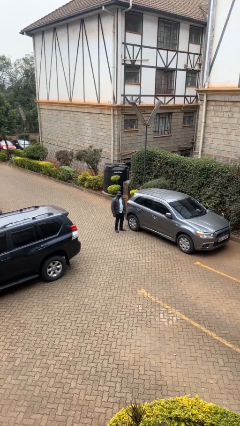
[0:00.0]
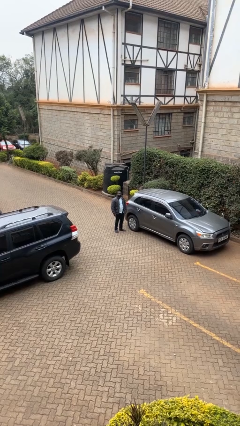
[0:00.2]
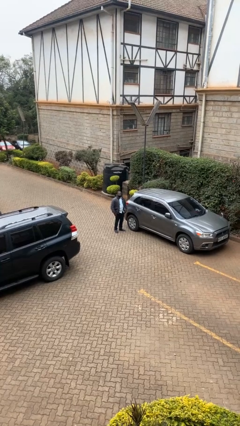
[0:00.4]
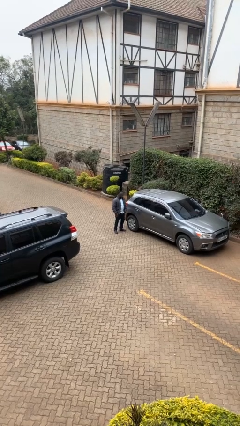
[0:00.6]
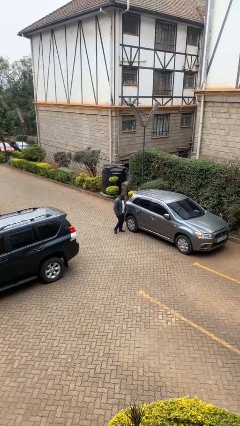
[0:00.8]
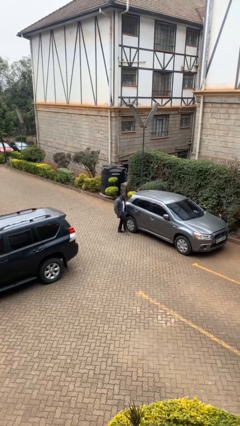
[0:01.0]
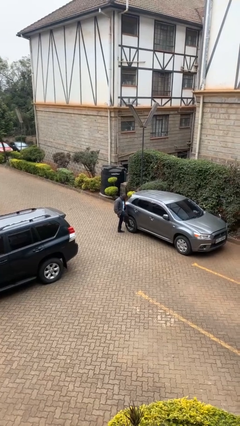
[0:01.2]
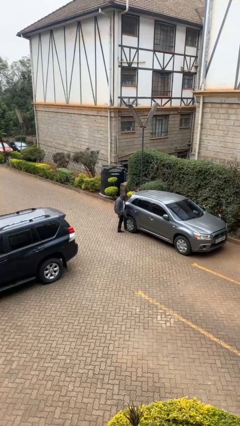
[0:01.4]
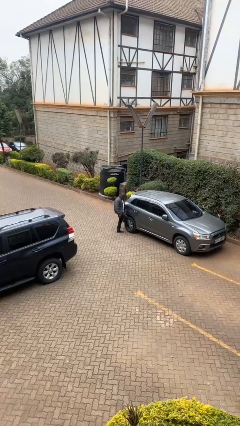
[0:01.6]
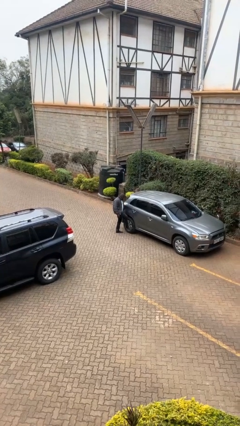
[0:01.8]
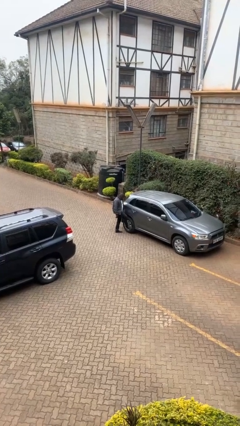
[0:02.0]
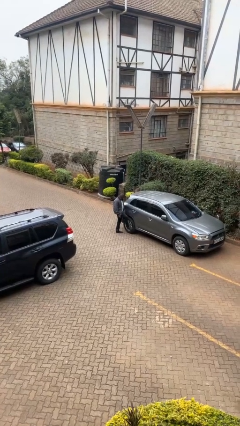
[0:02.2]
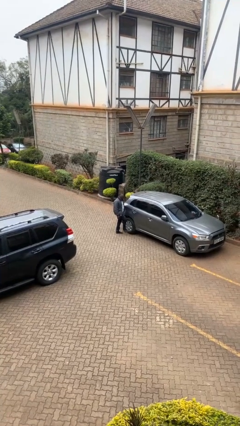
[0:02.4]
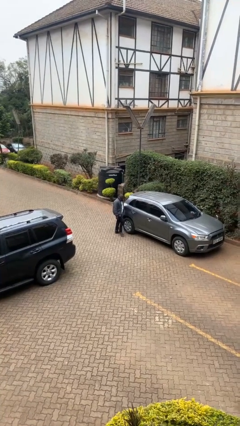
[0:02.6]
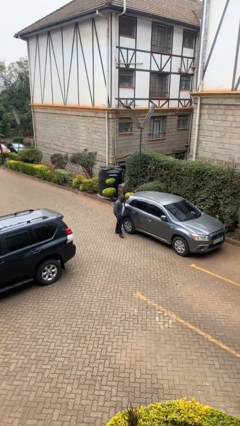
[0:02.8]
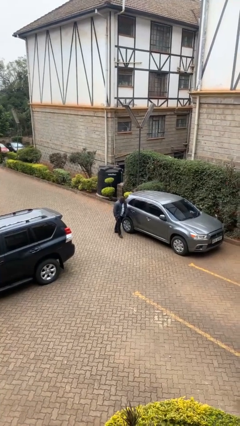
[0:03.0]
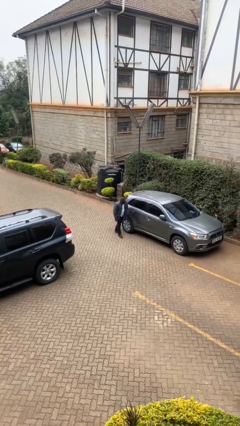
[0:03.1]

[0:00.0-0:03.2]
person kicks car tires

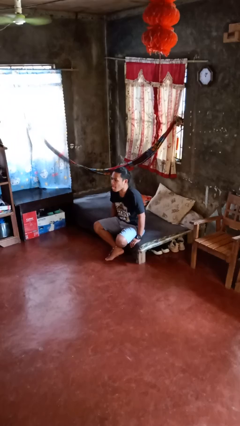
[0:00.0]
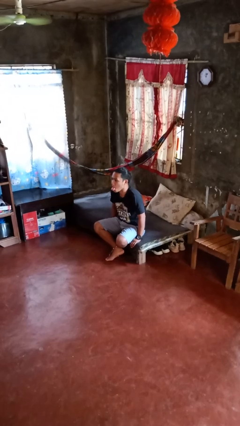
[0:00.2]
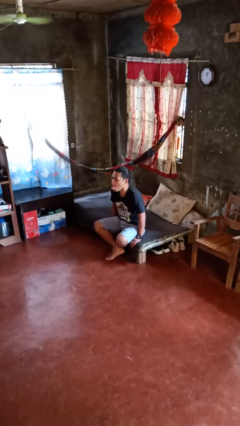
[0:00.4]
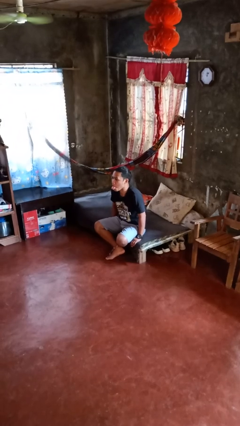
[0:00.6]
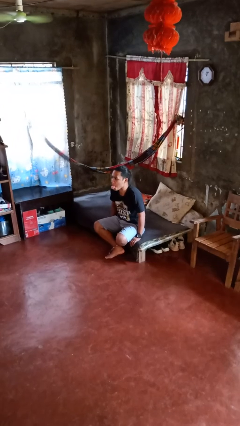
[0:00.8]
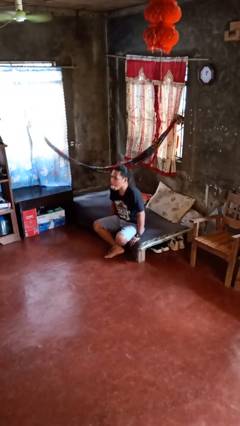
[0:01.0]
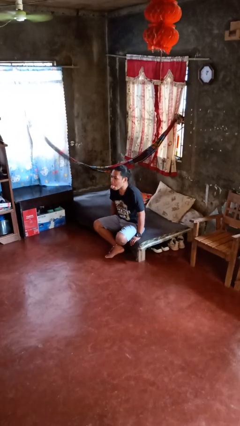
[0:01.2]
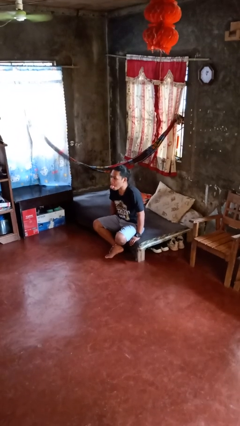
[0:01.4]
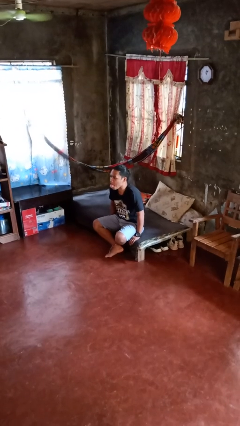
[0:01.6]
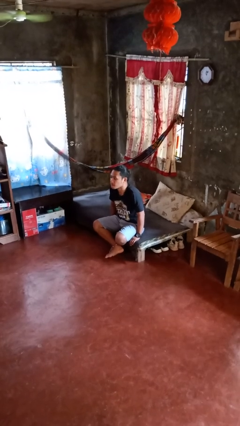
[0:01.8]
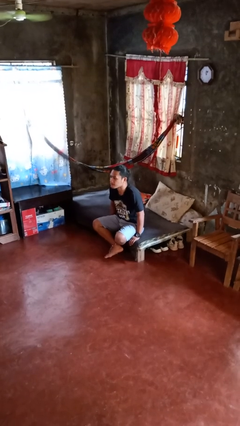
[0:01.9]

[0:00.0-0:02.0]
person sticks out tongue

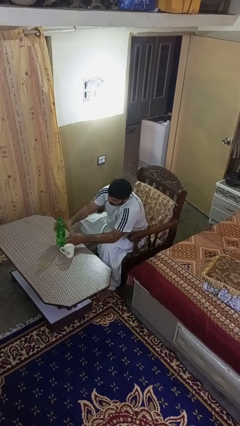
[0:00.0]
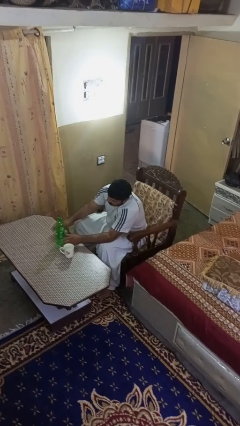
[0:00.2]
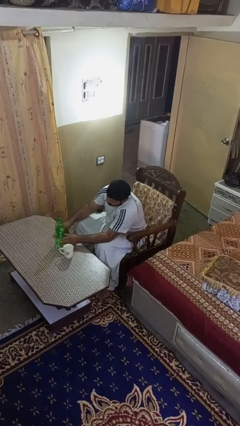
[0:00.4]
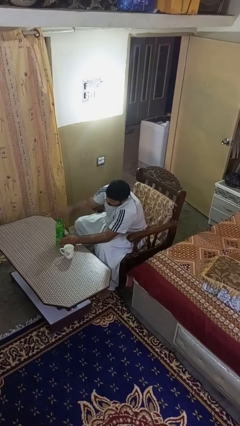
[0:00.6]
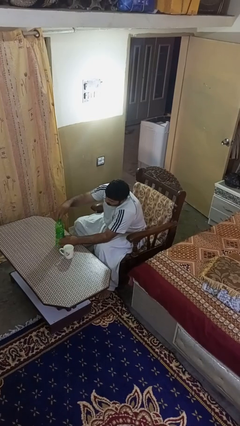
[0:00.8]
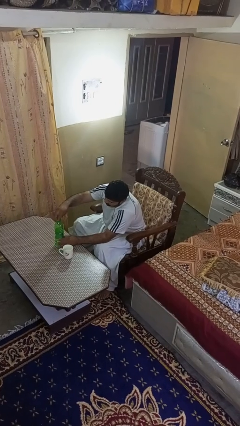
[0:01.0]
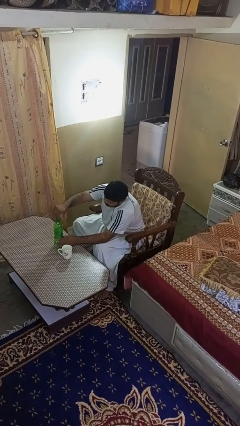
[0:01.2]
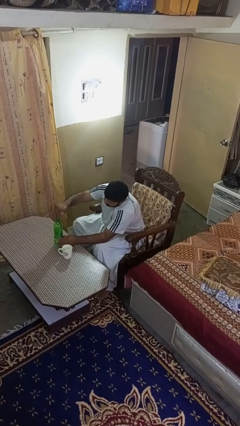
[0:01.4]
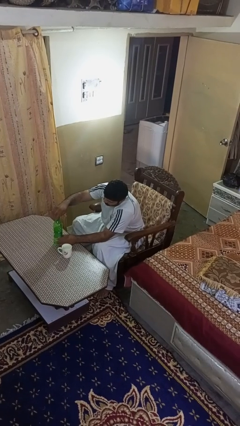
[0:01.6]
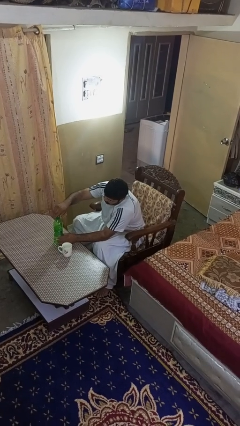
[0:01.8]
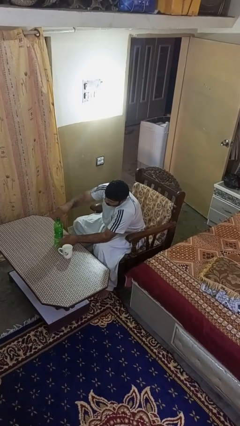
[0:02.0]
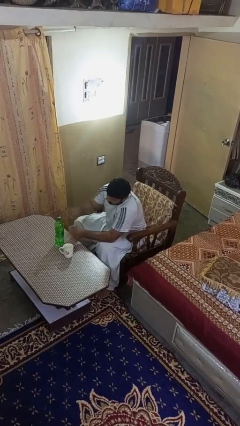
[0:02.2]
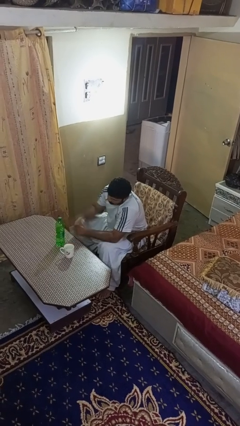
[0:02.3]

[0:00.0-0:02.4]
person screws lid to bottle

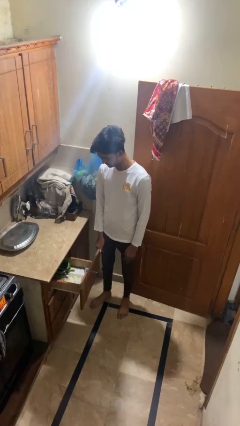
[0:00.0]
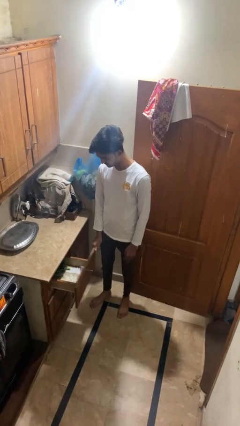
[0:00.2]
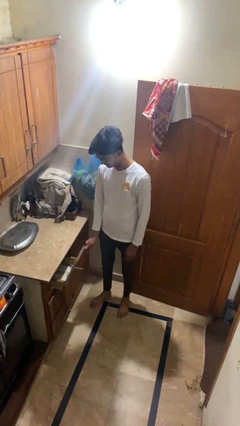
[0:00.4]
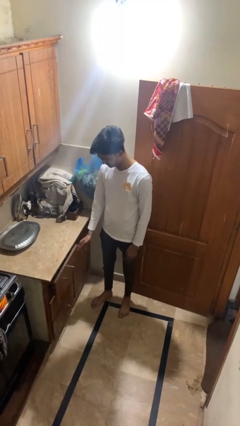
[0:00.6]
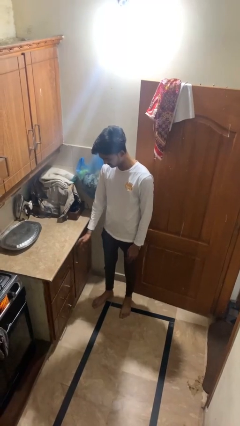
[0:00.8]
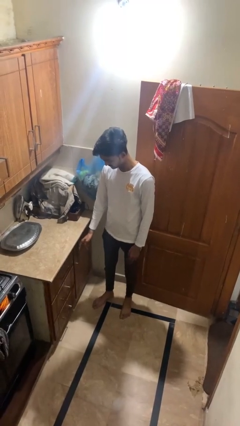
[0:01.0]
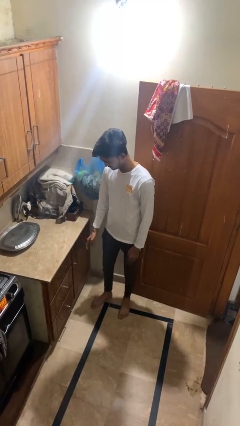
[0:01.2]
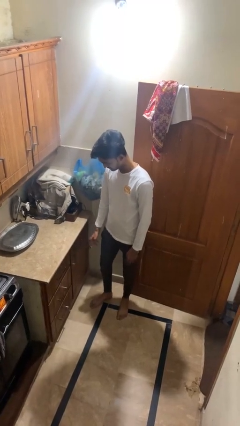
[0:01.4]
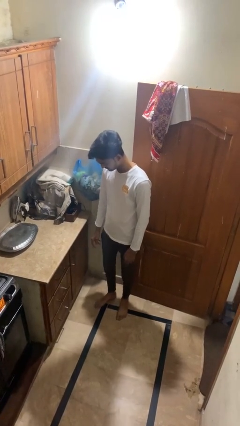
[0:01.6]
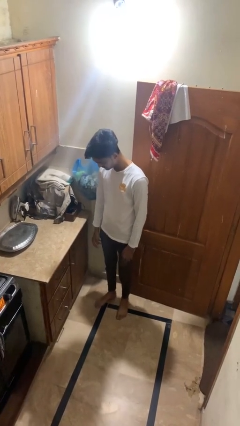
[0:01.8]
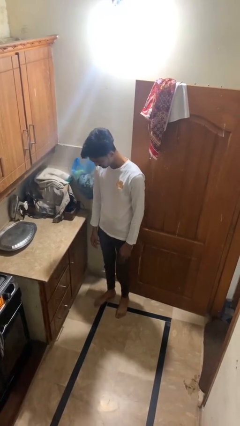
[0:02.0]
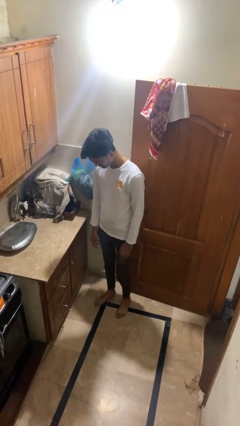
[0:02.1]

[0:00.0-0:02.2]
person closes kitchen drawer

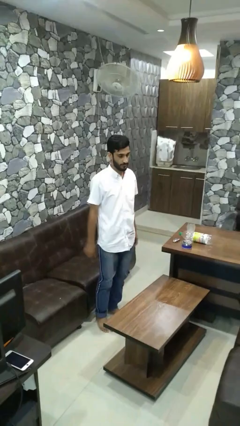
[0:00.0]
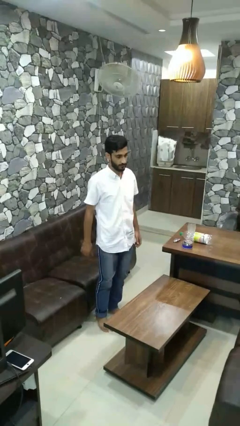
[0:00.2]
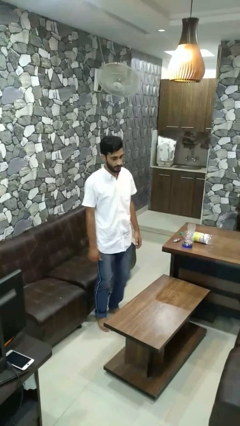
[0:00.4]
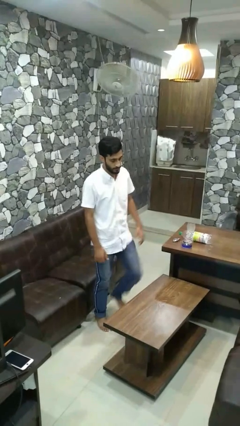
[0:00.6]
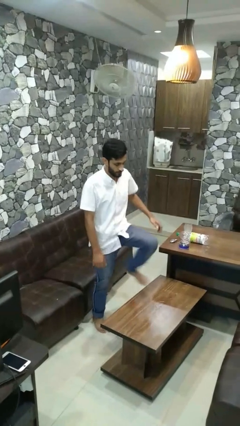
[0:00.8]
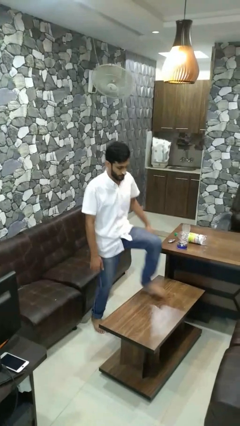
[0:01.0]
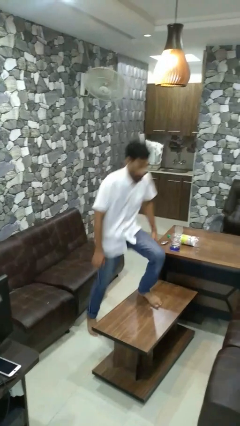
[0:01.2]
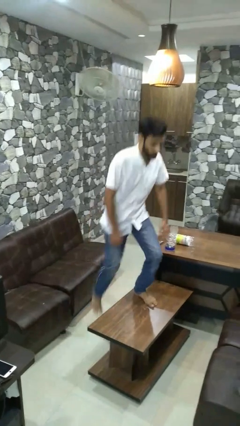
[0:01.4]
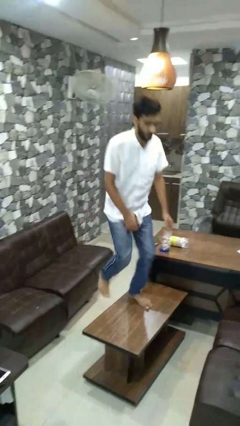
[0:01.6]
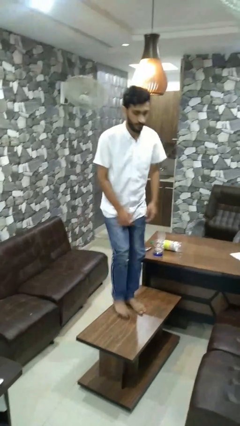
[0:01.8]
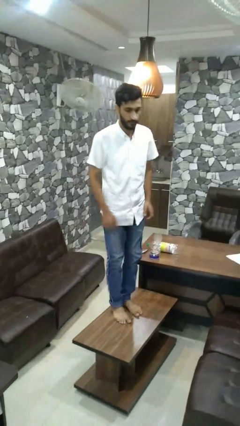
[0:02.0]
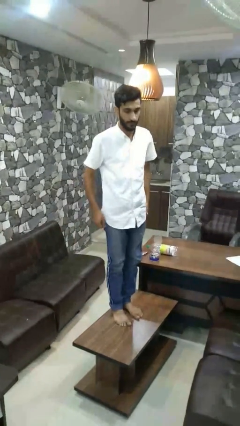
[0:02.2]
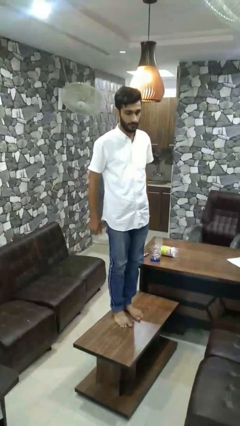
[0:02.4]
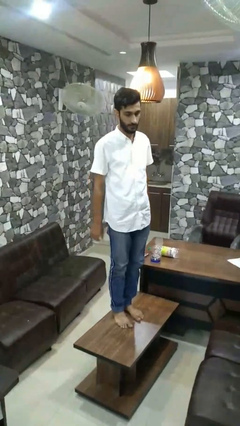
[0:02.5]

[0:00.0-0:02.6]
person climbs on table

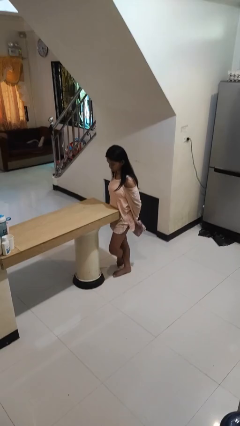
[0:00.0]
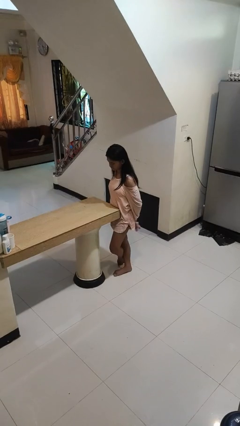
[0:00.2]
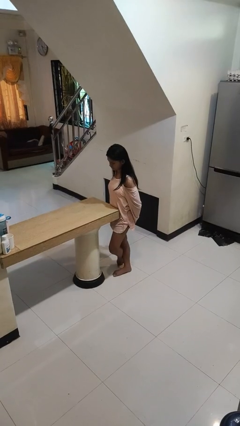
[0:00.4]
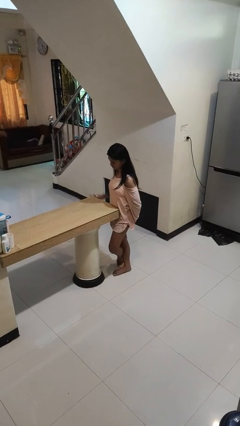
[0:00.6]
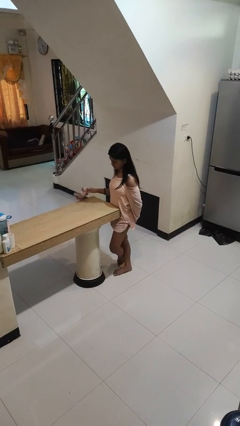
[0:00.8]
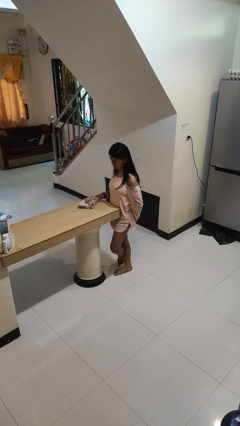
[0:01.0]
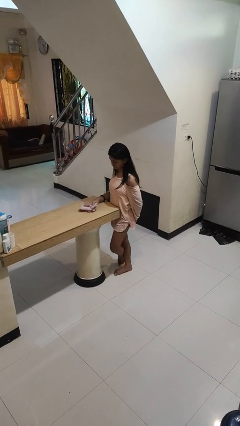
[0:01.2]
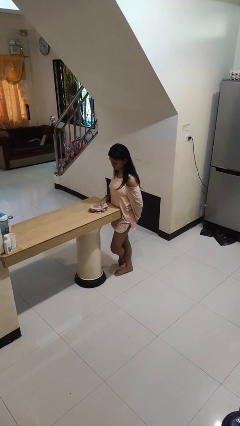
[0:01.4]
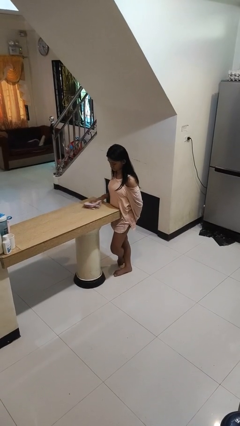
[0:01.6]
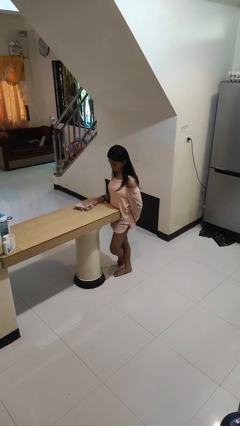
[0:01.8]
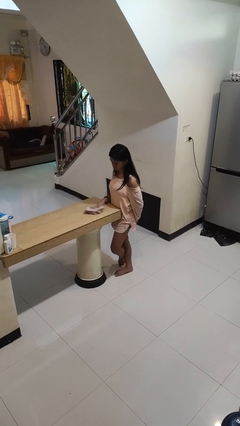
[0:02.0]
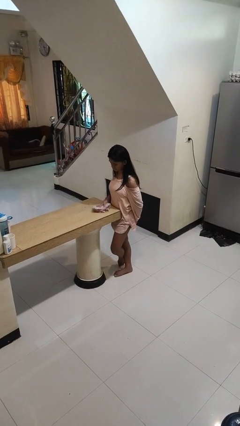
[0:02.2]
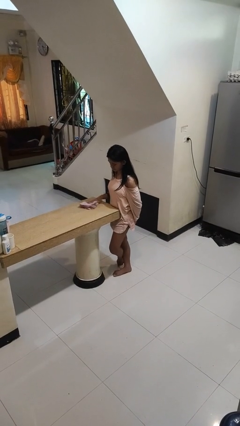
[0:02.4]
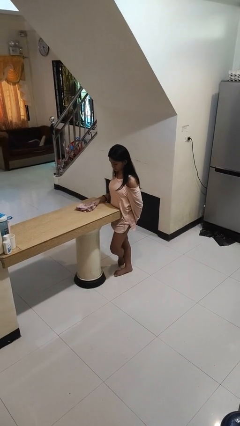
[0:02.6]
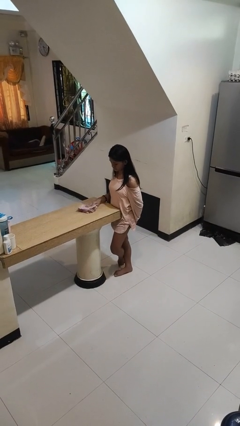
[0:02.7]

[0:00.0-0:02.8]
person cleans table with rag

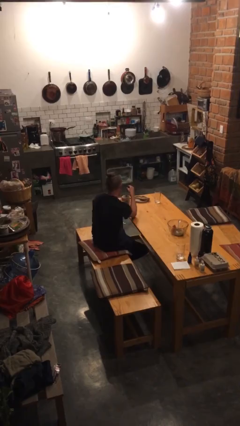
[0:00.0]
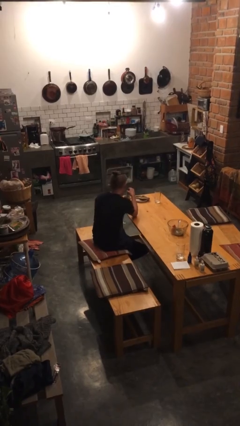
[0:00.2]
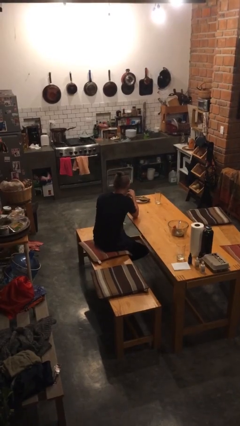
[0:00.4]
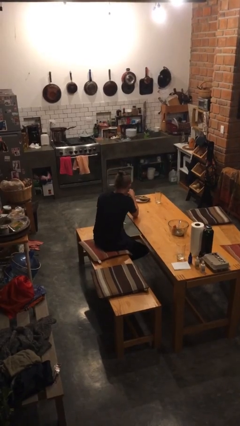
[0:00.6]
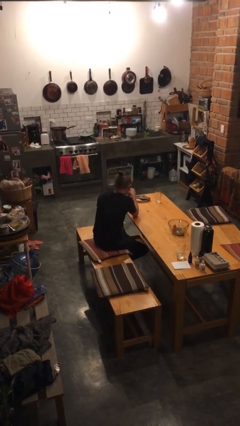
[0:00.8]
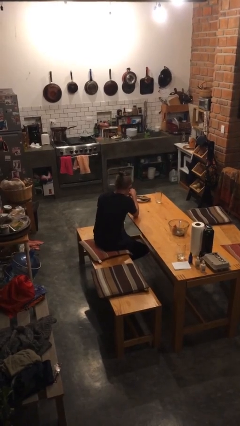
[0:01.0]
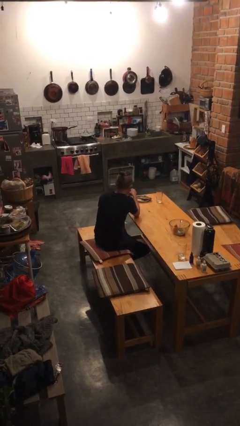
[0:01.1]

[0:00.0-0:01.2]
person stirs mug

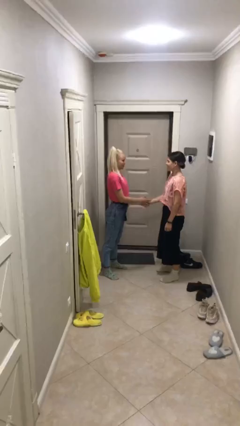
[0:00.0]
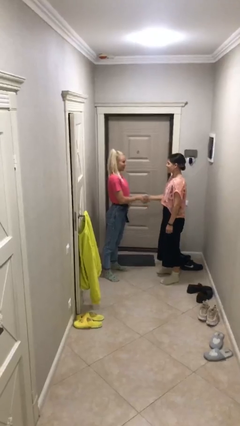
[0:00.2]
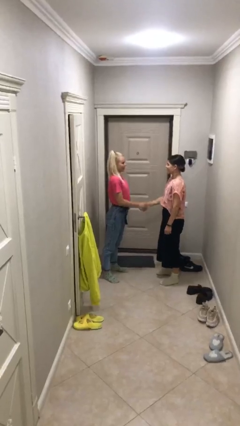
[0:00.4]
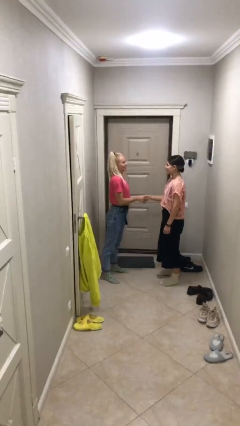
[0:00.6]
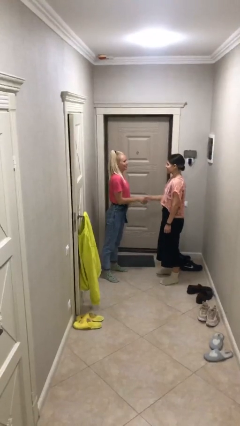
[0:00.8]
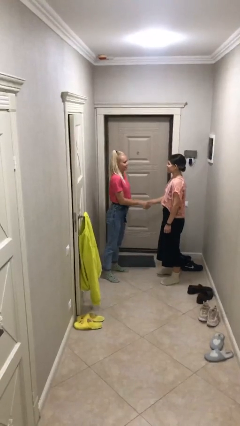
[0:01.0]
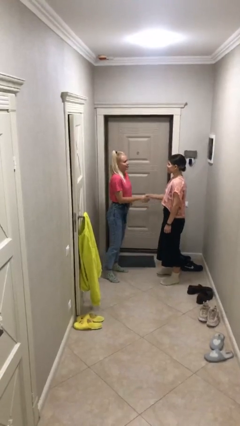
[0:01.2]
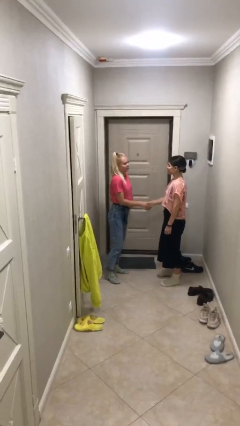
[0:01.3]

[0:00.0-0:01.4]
person shakes hand
